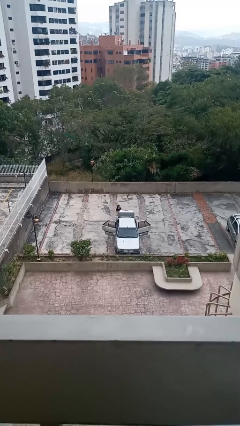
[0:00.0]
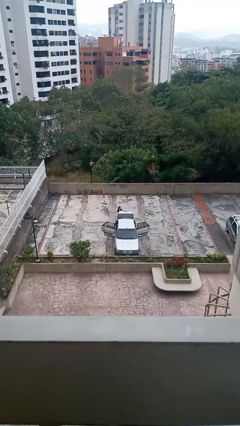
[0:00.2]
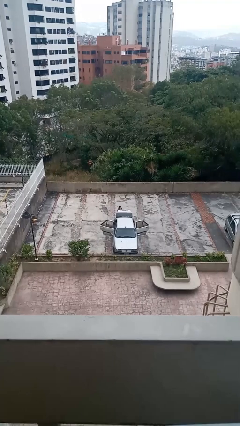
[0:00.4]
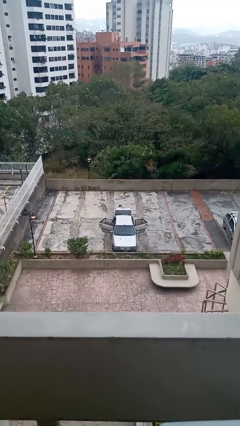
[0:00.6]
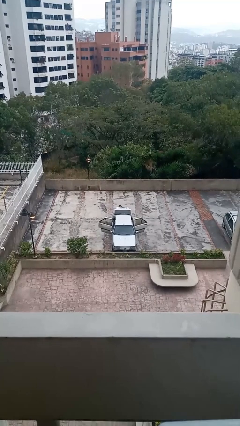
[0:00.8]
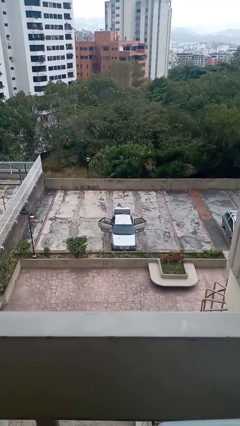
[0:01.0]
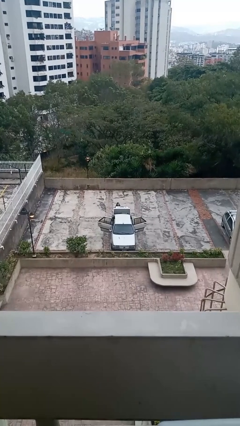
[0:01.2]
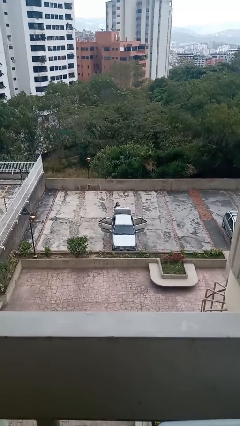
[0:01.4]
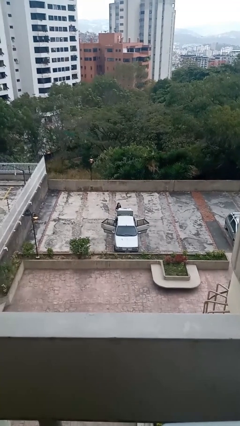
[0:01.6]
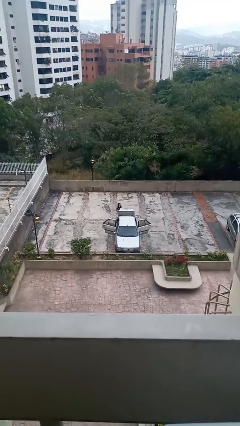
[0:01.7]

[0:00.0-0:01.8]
person unloads car

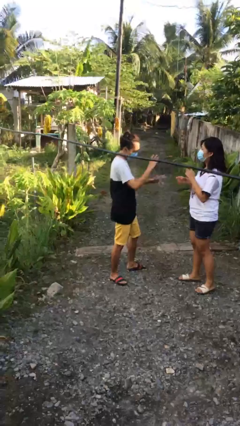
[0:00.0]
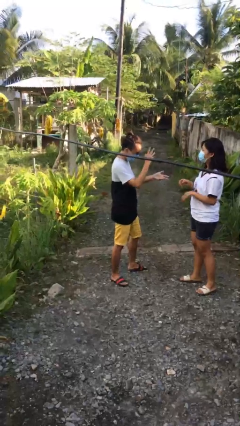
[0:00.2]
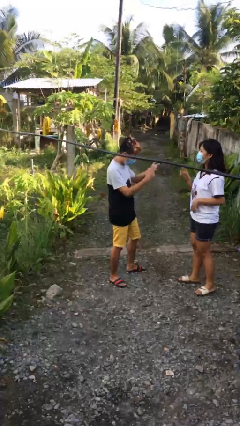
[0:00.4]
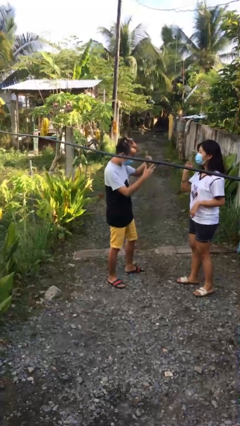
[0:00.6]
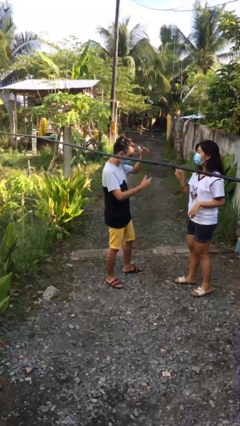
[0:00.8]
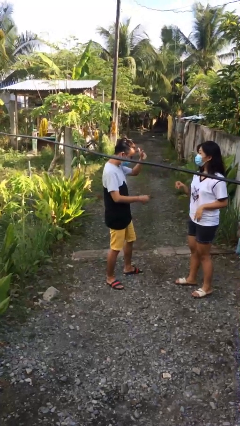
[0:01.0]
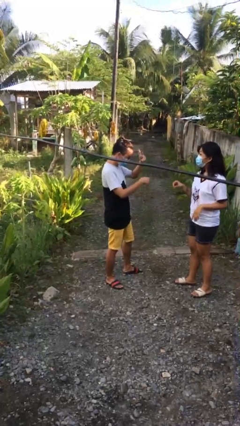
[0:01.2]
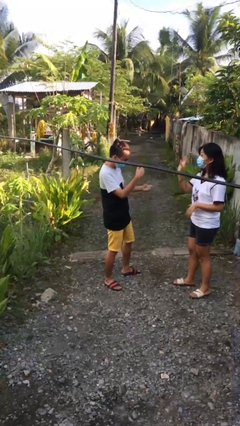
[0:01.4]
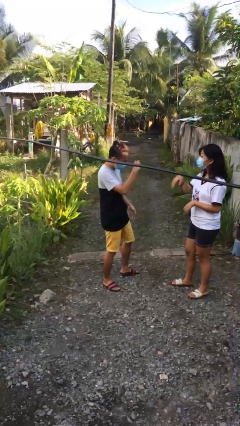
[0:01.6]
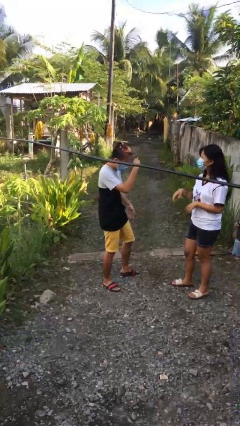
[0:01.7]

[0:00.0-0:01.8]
person talks to person

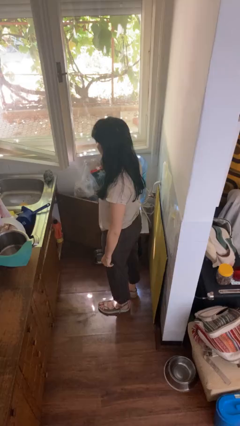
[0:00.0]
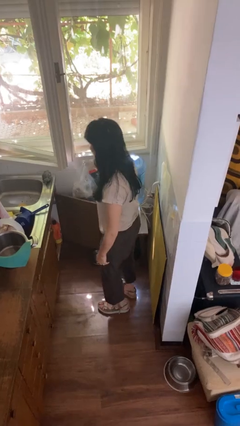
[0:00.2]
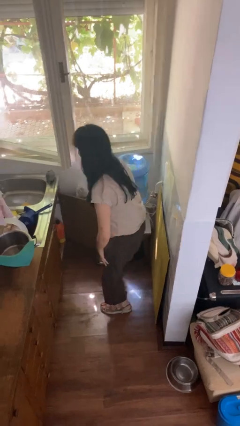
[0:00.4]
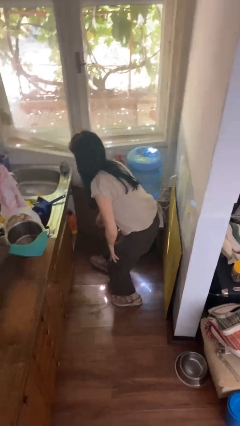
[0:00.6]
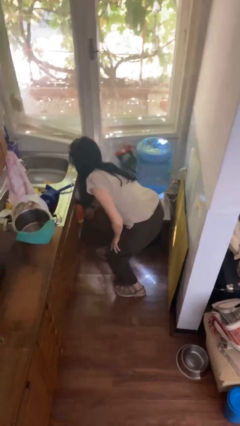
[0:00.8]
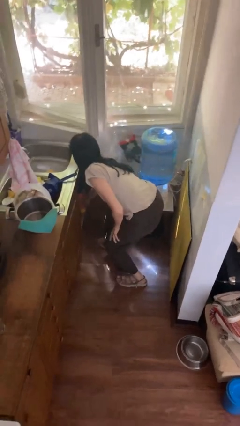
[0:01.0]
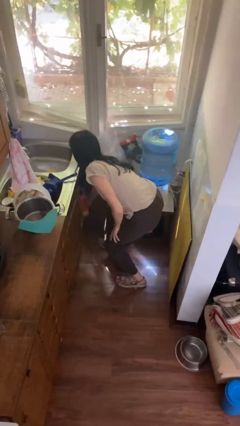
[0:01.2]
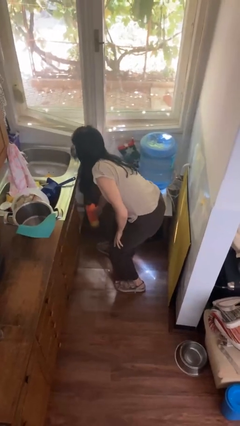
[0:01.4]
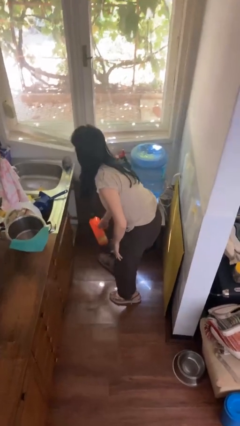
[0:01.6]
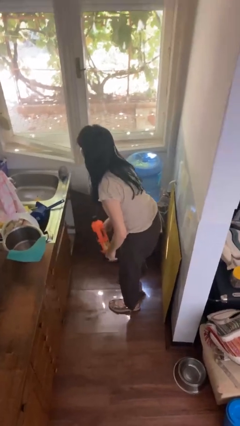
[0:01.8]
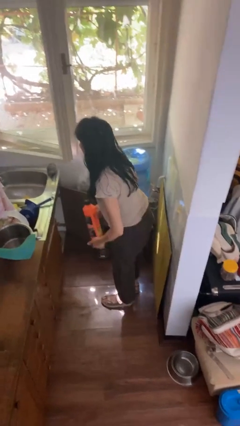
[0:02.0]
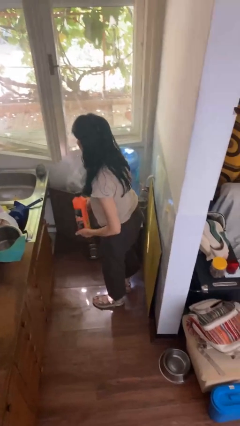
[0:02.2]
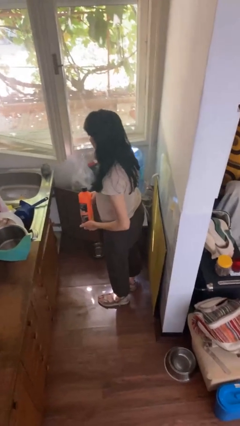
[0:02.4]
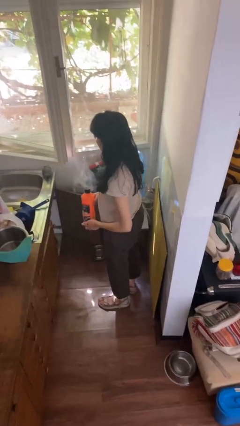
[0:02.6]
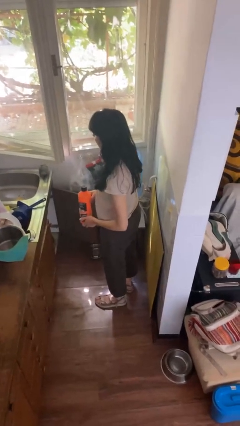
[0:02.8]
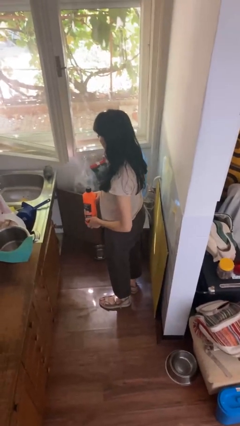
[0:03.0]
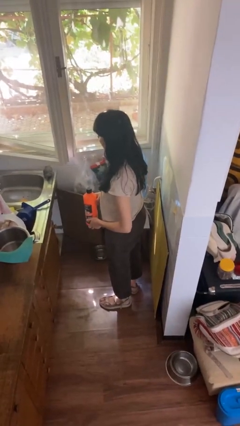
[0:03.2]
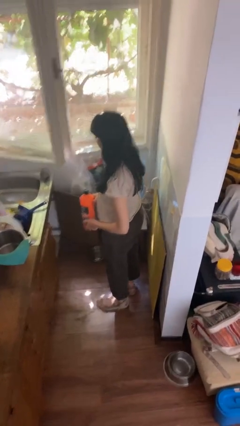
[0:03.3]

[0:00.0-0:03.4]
person picks up object from cabinet

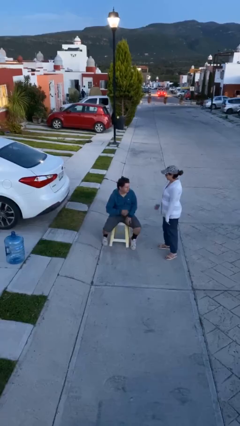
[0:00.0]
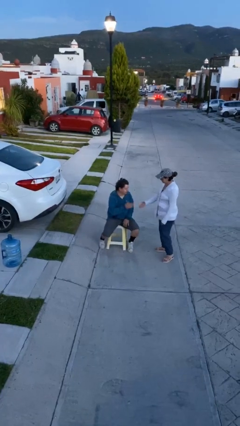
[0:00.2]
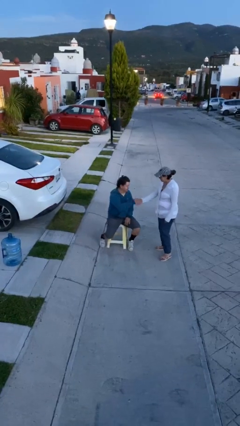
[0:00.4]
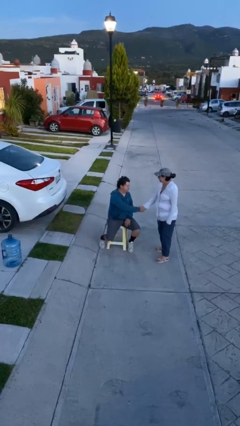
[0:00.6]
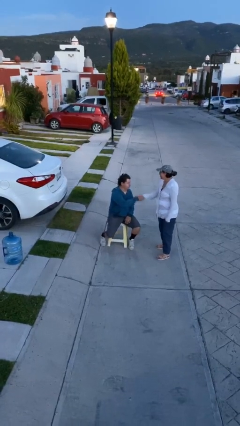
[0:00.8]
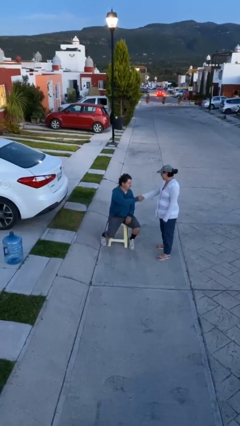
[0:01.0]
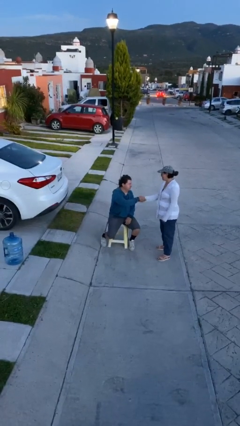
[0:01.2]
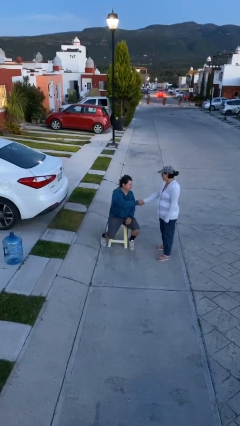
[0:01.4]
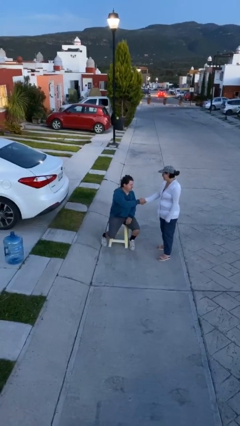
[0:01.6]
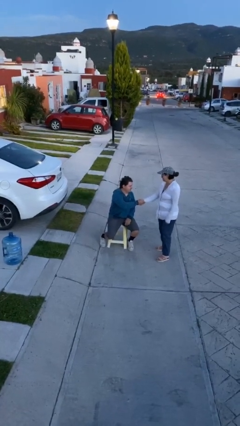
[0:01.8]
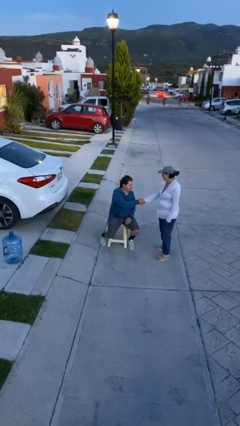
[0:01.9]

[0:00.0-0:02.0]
person shakes hand

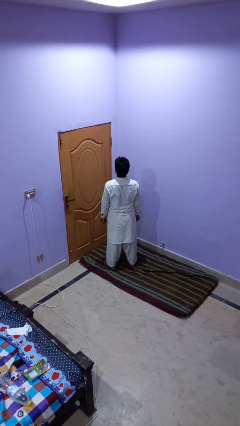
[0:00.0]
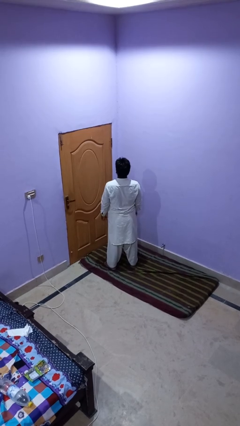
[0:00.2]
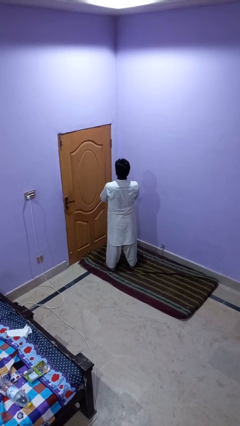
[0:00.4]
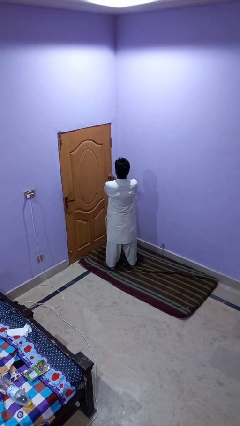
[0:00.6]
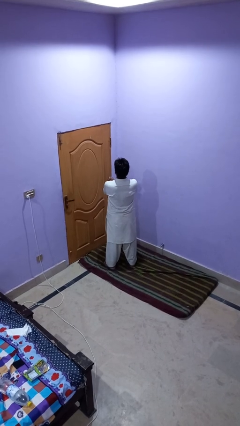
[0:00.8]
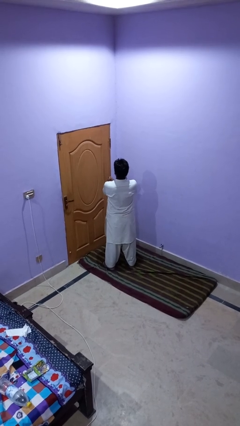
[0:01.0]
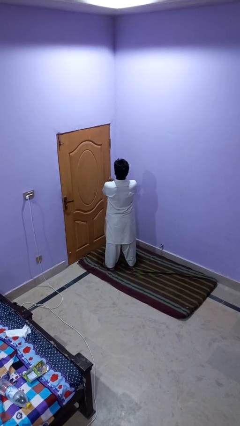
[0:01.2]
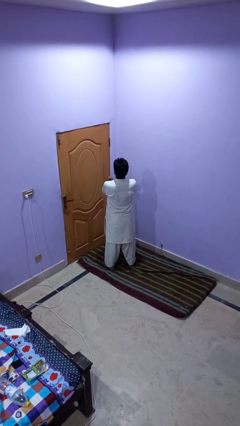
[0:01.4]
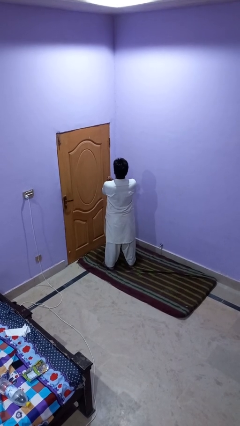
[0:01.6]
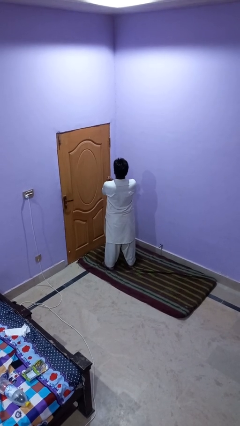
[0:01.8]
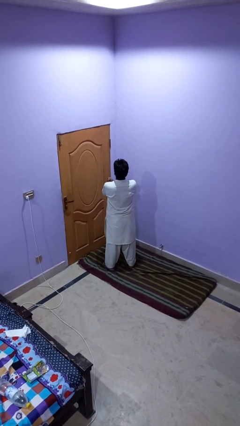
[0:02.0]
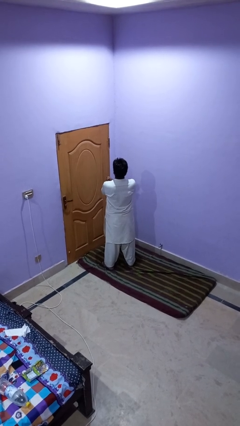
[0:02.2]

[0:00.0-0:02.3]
person crosses arms

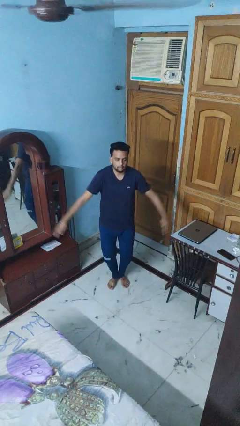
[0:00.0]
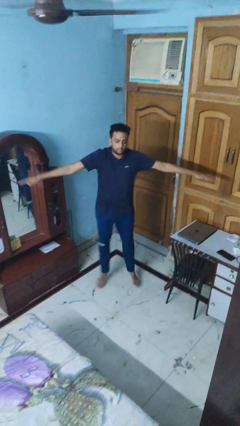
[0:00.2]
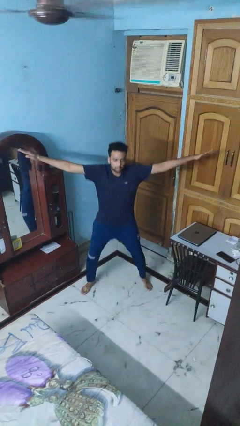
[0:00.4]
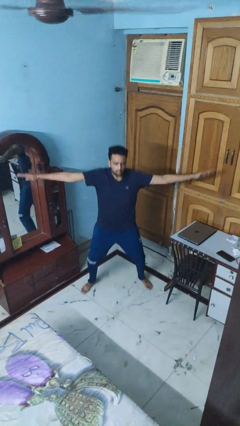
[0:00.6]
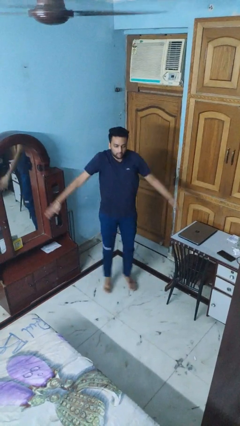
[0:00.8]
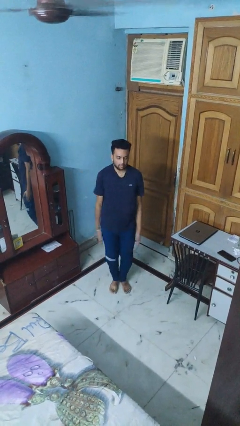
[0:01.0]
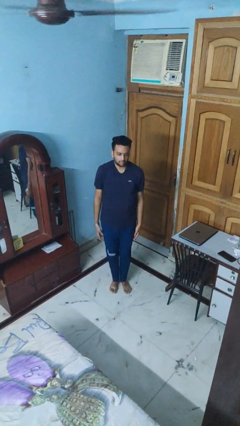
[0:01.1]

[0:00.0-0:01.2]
person exercises with jumping jacks

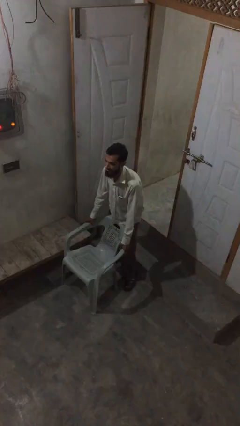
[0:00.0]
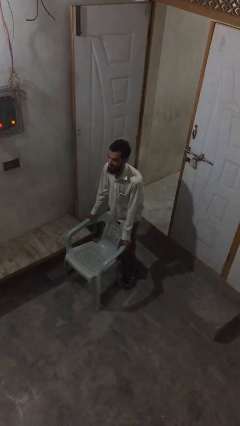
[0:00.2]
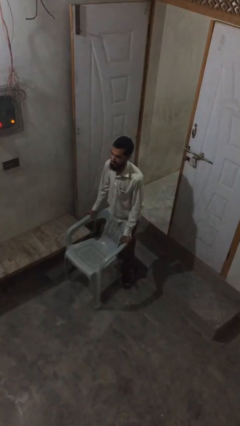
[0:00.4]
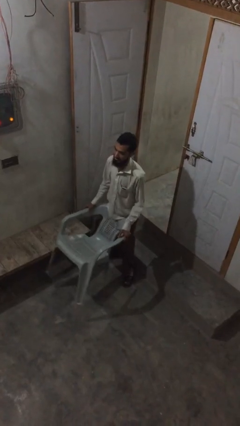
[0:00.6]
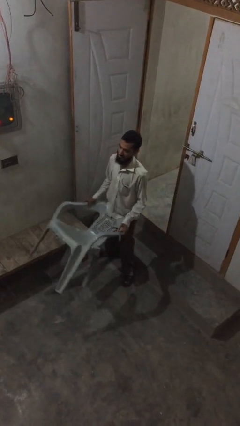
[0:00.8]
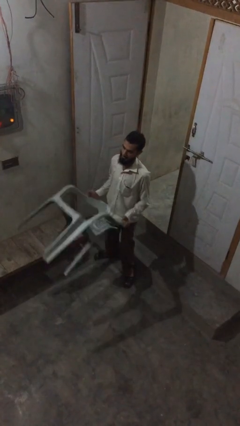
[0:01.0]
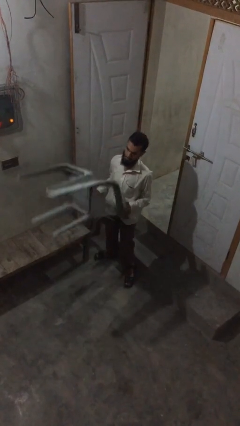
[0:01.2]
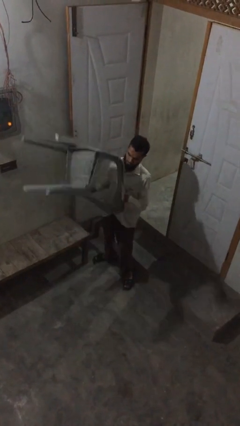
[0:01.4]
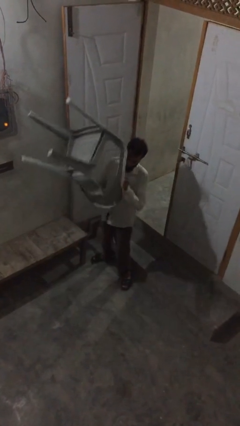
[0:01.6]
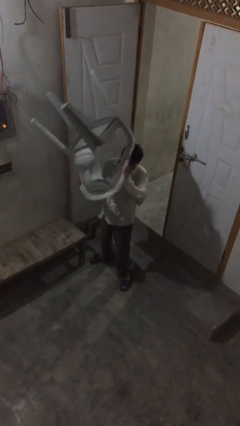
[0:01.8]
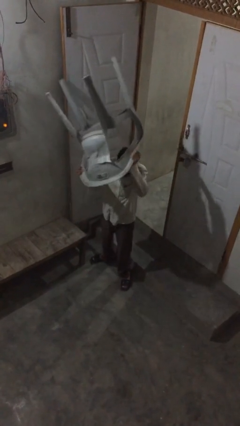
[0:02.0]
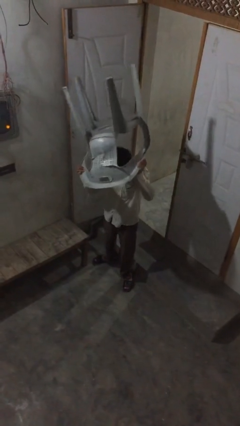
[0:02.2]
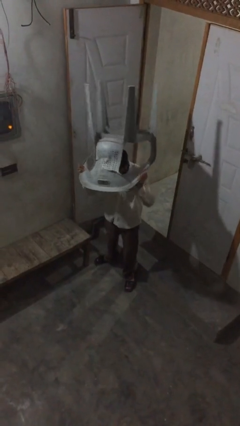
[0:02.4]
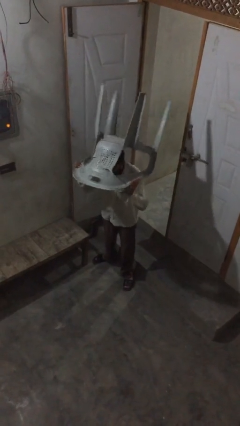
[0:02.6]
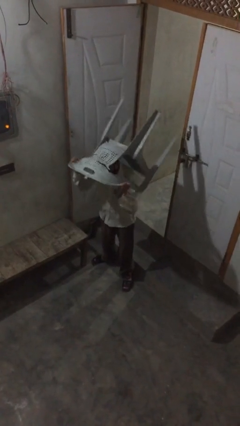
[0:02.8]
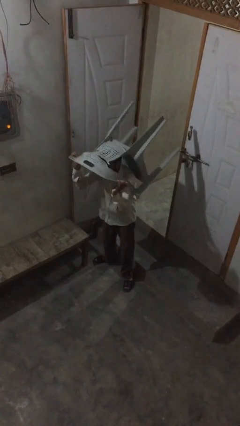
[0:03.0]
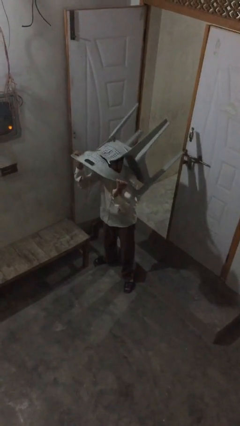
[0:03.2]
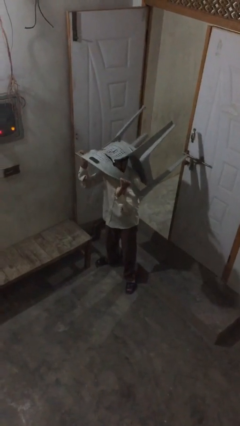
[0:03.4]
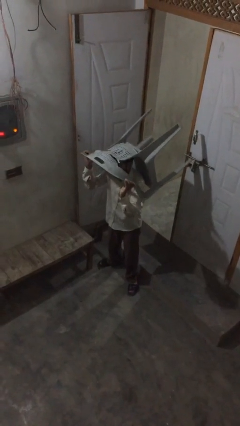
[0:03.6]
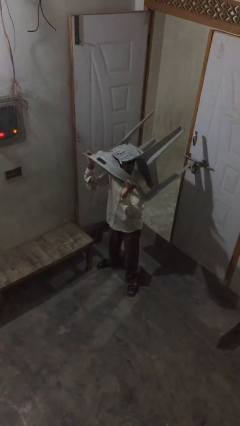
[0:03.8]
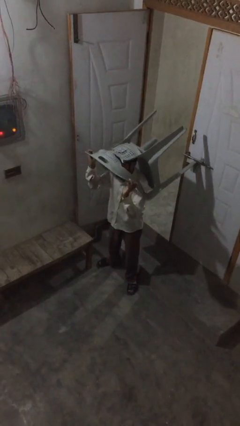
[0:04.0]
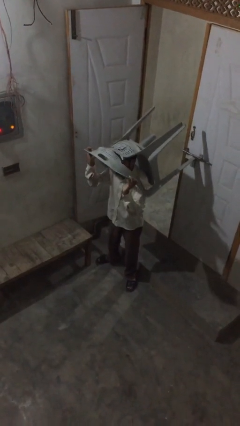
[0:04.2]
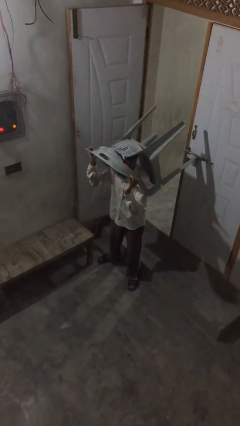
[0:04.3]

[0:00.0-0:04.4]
person picks up object from floor

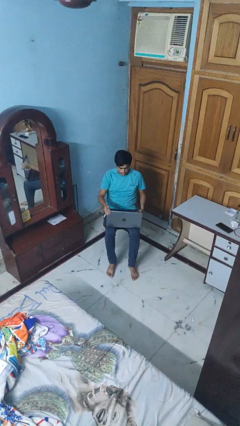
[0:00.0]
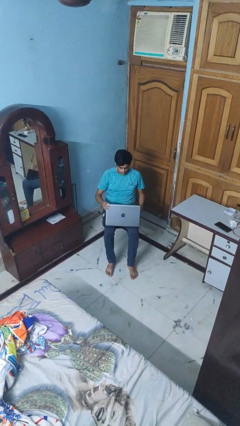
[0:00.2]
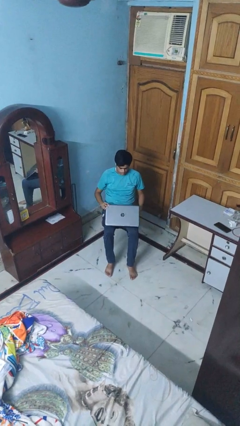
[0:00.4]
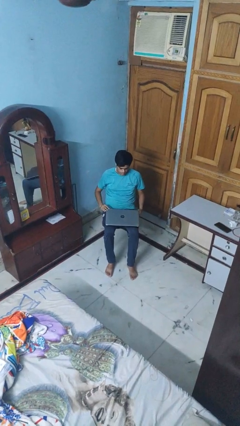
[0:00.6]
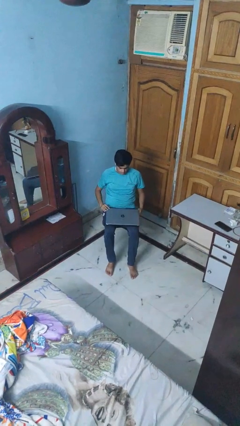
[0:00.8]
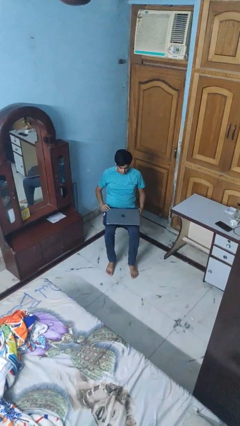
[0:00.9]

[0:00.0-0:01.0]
person closes laptop
